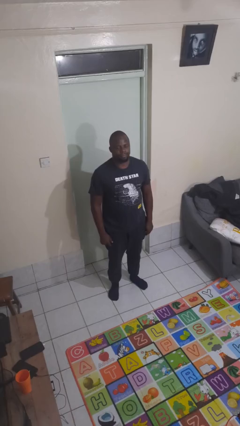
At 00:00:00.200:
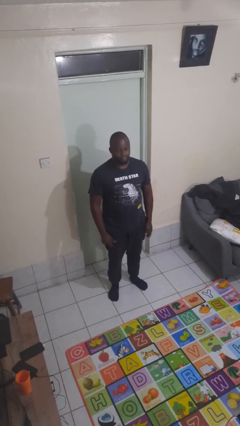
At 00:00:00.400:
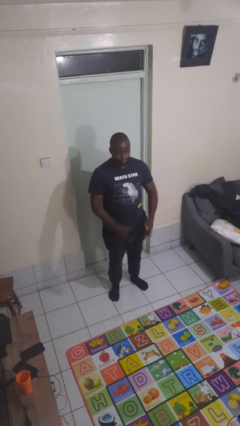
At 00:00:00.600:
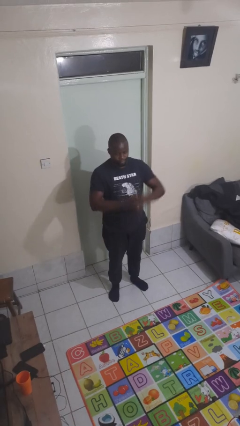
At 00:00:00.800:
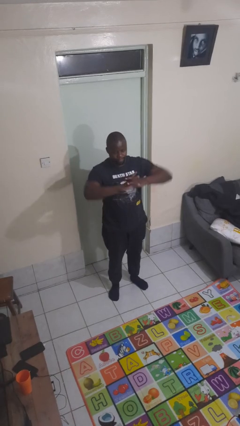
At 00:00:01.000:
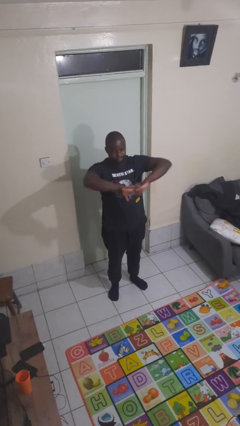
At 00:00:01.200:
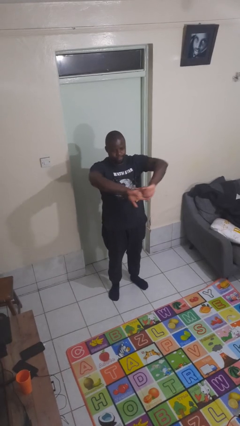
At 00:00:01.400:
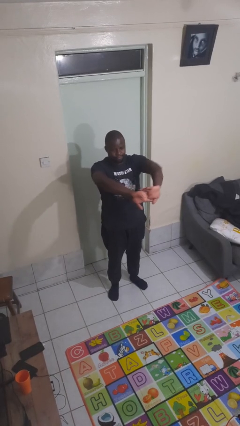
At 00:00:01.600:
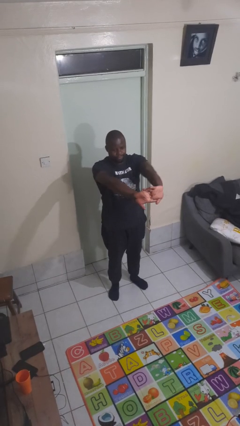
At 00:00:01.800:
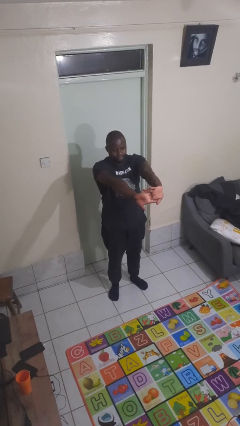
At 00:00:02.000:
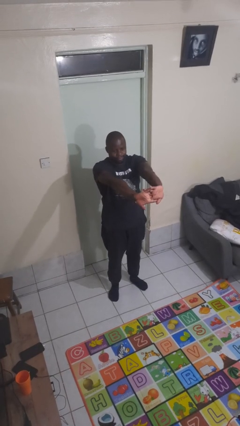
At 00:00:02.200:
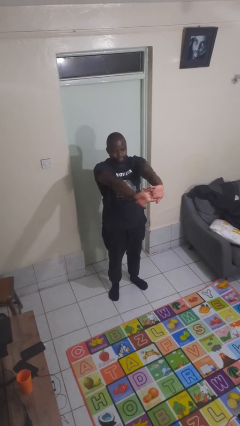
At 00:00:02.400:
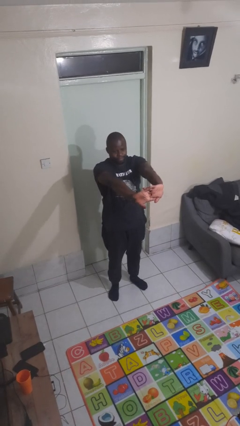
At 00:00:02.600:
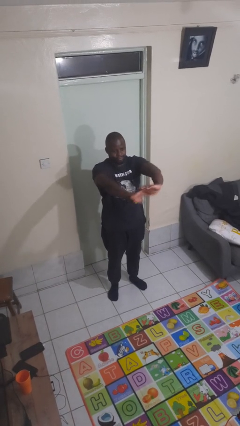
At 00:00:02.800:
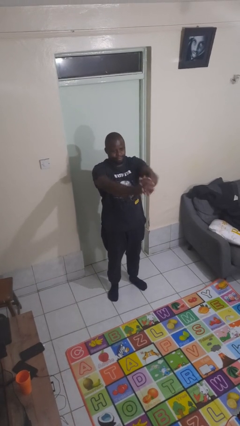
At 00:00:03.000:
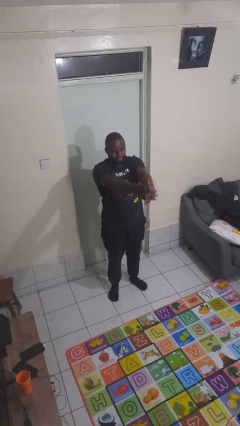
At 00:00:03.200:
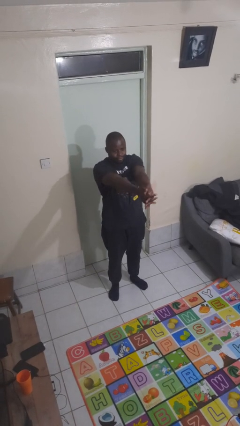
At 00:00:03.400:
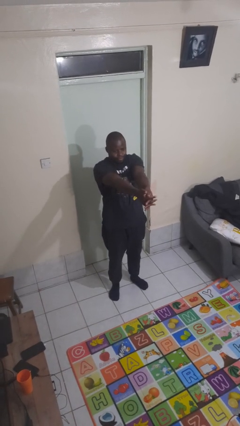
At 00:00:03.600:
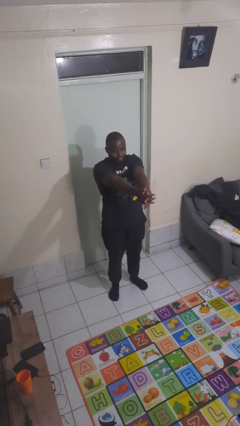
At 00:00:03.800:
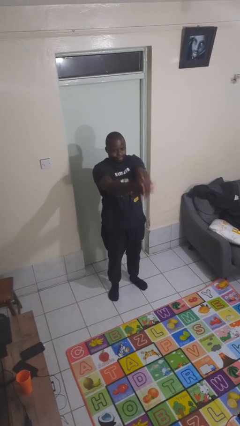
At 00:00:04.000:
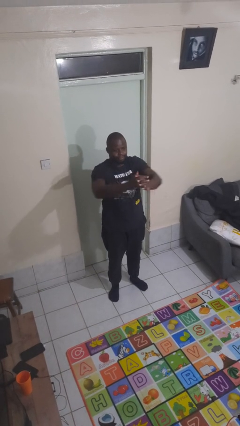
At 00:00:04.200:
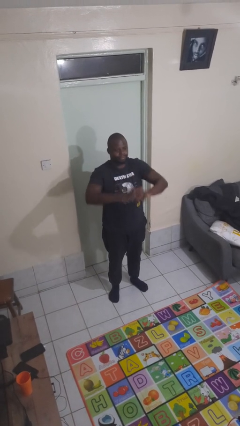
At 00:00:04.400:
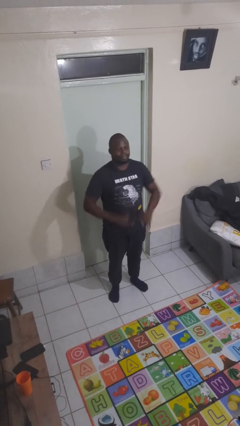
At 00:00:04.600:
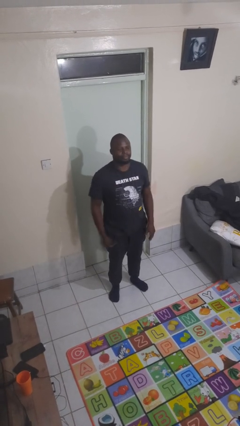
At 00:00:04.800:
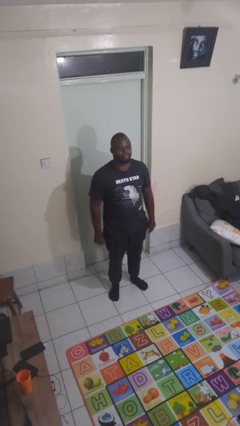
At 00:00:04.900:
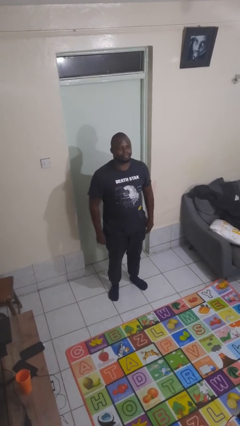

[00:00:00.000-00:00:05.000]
person cracks knuckles

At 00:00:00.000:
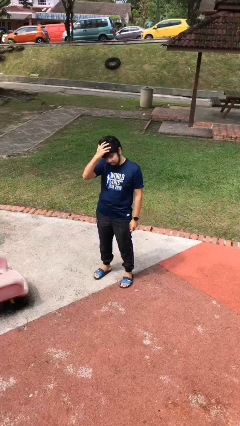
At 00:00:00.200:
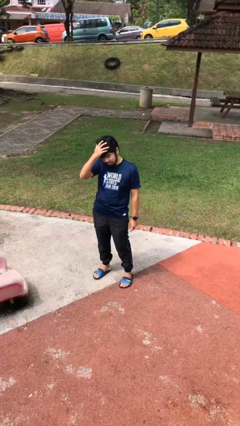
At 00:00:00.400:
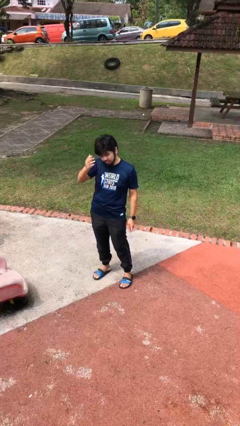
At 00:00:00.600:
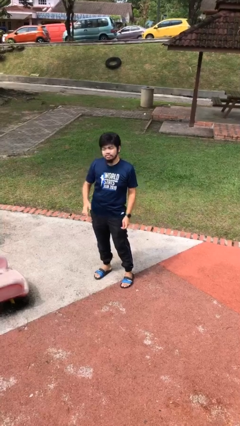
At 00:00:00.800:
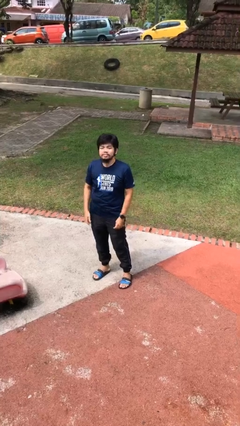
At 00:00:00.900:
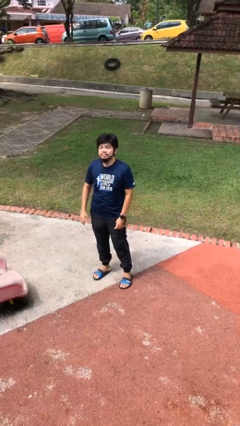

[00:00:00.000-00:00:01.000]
person pats head

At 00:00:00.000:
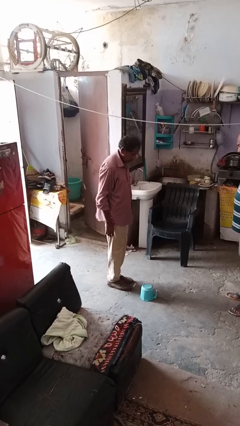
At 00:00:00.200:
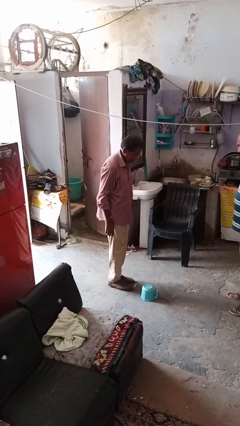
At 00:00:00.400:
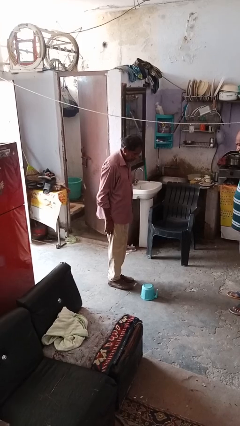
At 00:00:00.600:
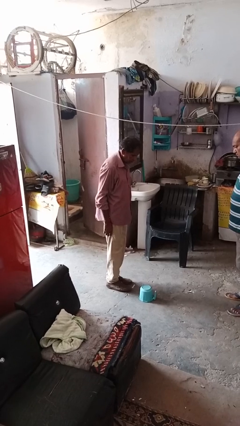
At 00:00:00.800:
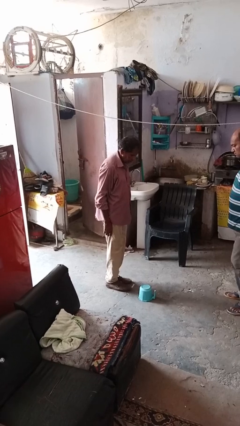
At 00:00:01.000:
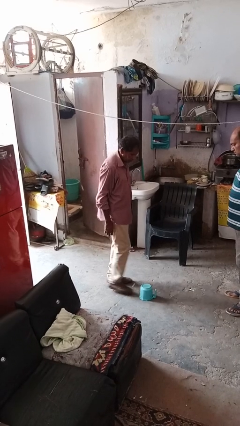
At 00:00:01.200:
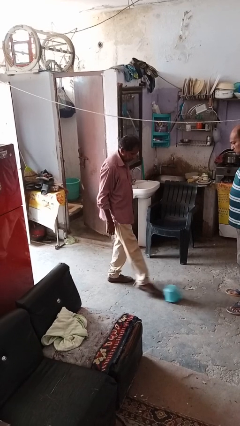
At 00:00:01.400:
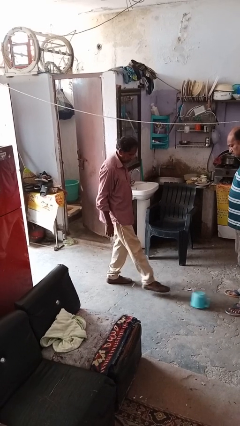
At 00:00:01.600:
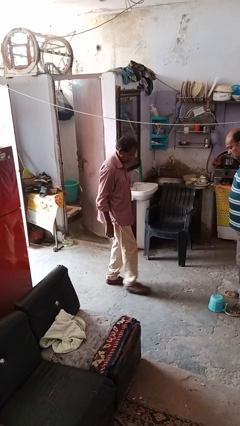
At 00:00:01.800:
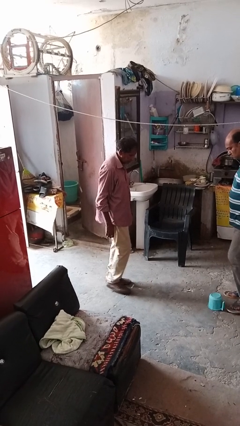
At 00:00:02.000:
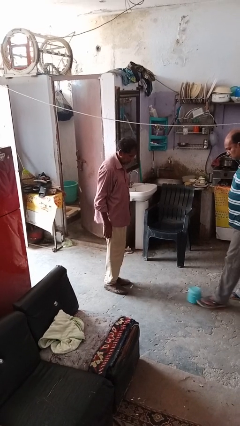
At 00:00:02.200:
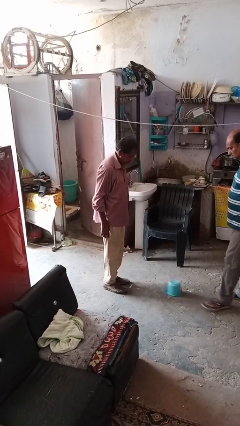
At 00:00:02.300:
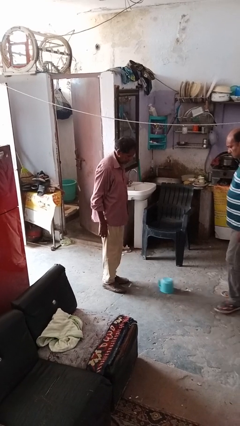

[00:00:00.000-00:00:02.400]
person kicks object to person

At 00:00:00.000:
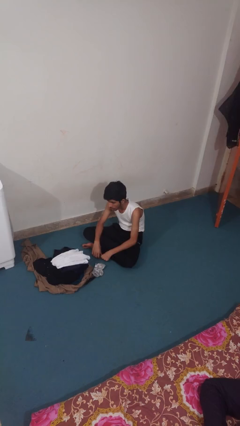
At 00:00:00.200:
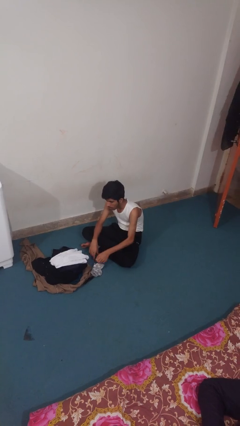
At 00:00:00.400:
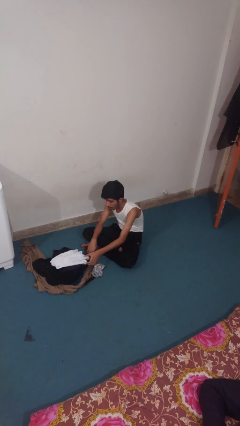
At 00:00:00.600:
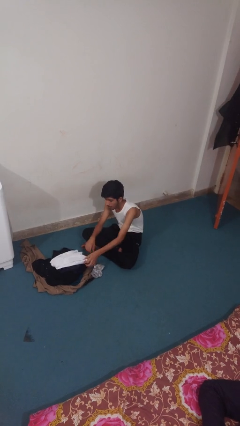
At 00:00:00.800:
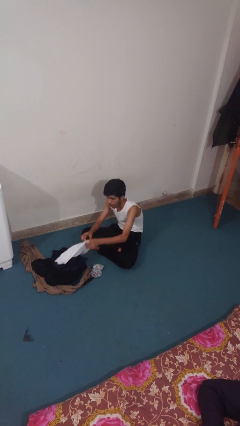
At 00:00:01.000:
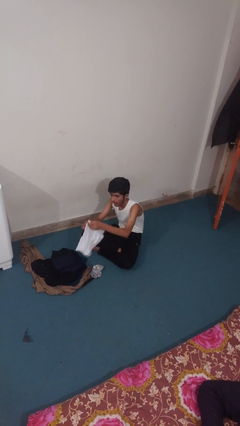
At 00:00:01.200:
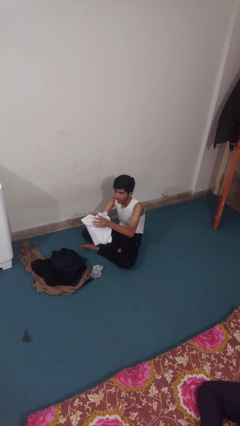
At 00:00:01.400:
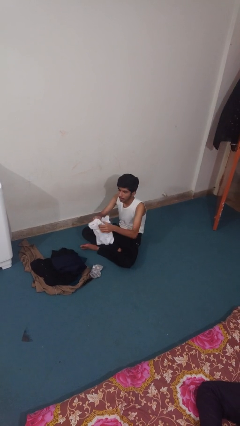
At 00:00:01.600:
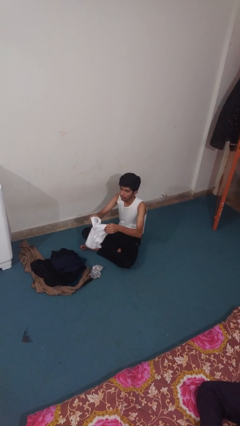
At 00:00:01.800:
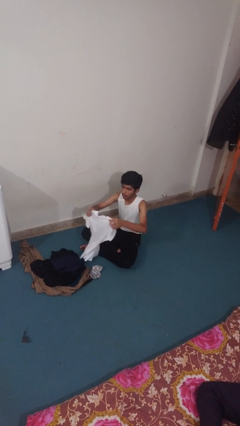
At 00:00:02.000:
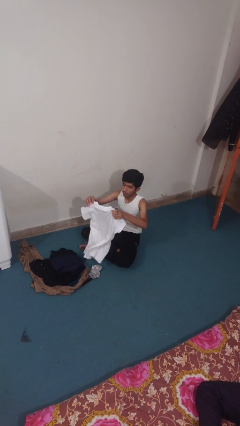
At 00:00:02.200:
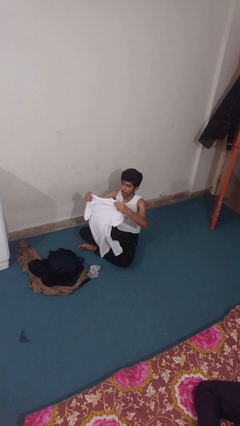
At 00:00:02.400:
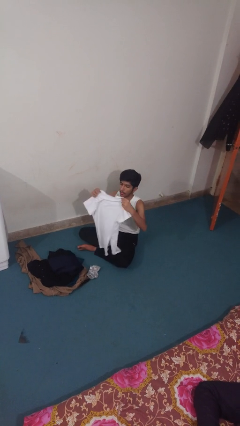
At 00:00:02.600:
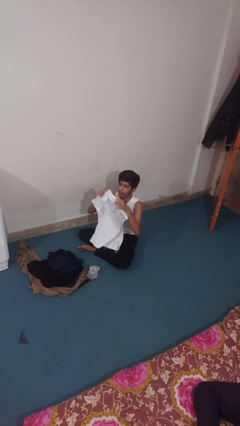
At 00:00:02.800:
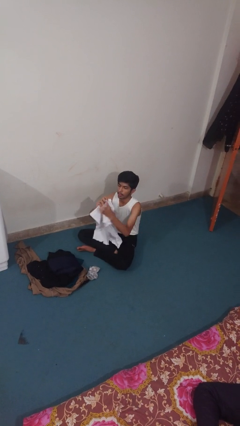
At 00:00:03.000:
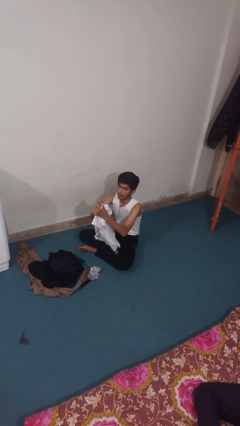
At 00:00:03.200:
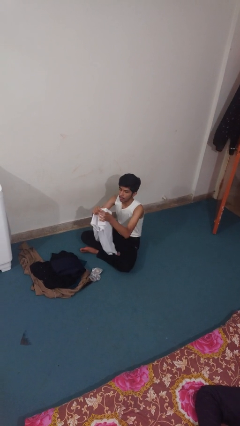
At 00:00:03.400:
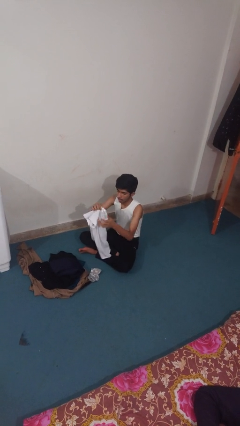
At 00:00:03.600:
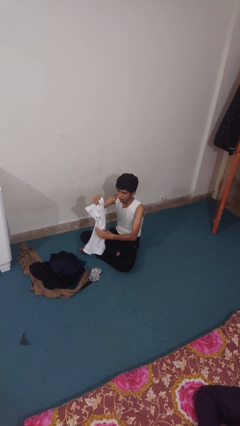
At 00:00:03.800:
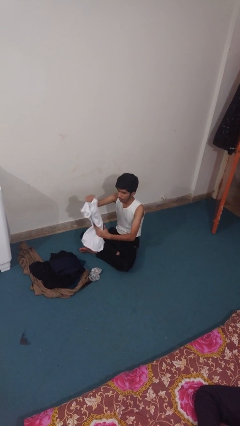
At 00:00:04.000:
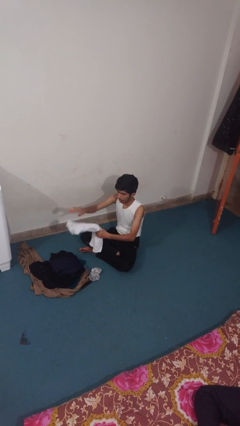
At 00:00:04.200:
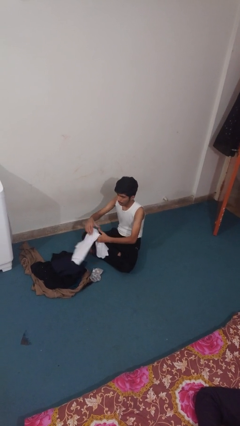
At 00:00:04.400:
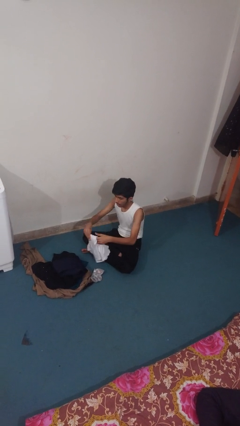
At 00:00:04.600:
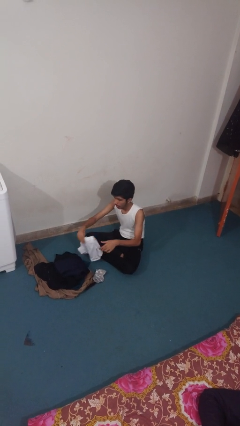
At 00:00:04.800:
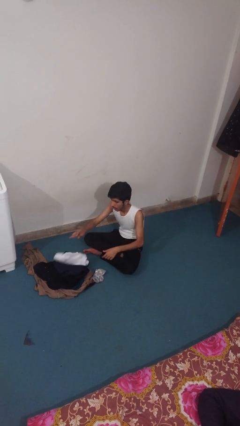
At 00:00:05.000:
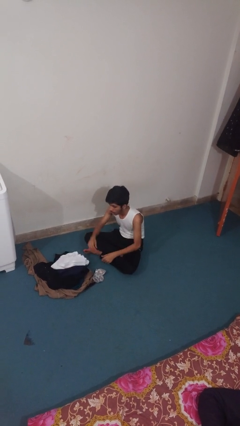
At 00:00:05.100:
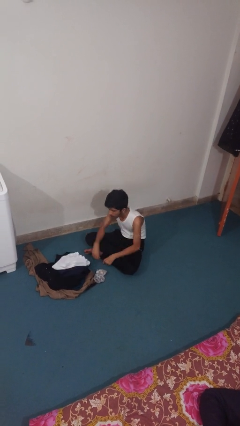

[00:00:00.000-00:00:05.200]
person folds shirt

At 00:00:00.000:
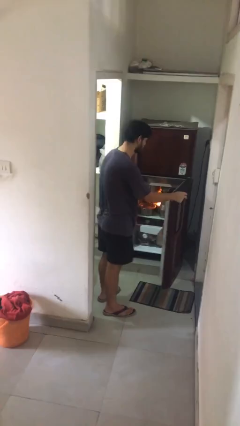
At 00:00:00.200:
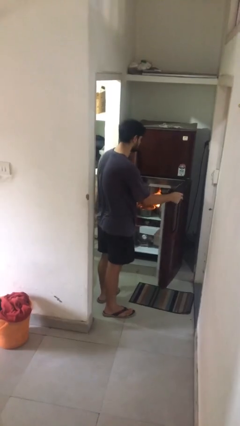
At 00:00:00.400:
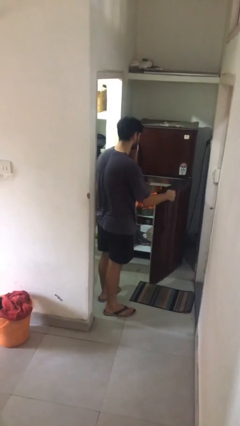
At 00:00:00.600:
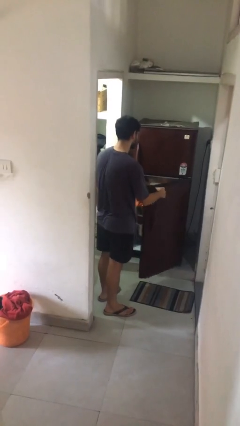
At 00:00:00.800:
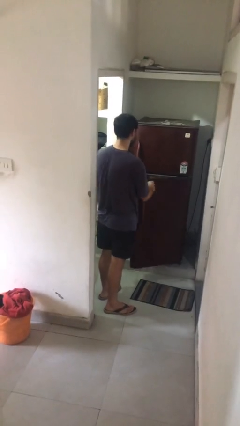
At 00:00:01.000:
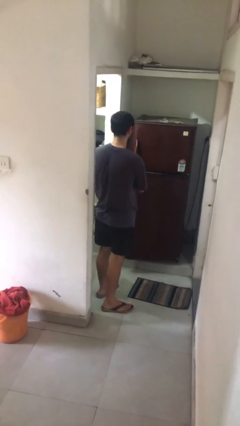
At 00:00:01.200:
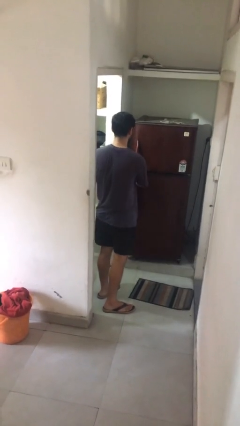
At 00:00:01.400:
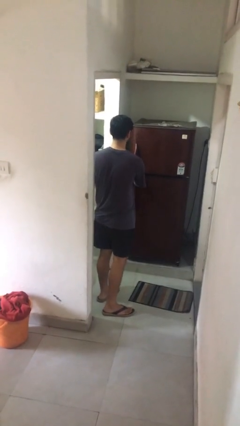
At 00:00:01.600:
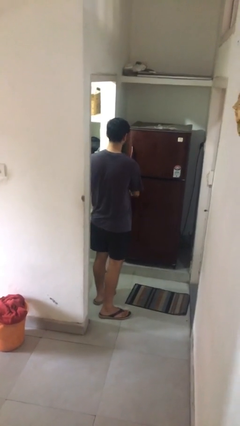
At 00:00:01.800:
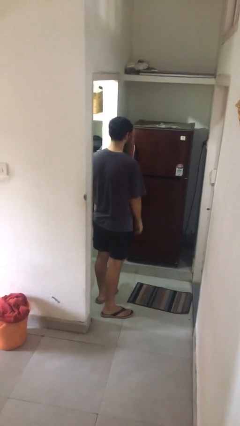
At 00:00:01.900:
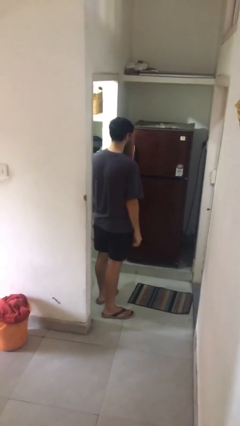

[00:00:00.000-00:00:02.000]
person closes refrigerator

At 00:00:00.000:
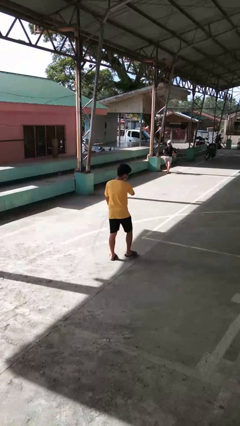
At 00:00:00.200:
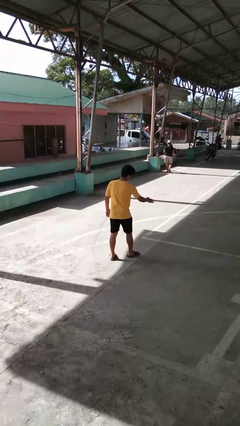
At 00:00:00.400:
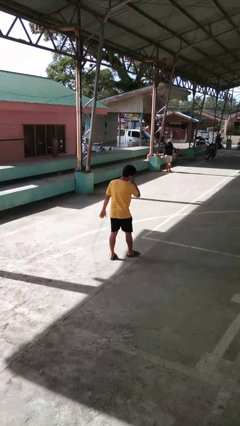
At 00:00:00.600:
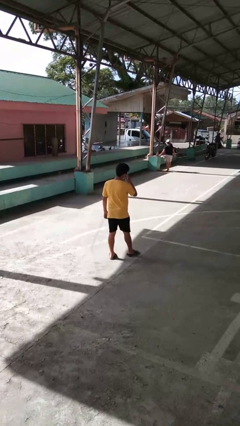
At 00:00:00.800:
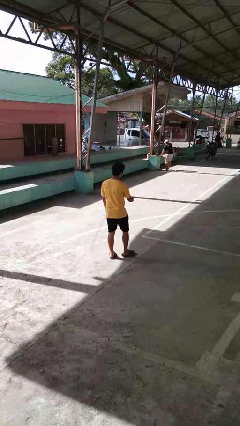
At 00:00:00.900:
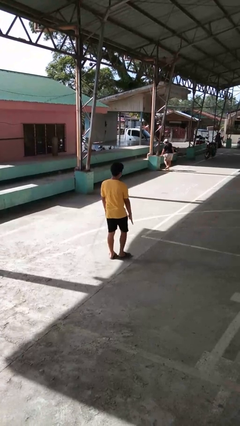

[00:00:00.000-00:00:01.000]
person karate chop

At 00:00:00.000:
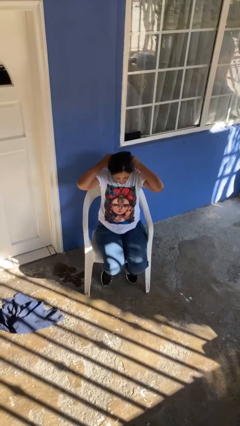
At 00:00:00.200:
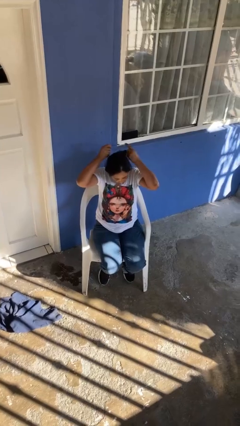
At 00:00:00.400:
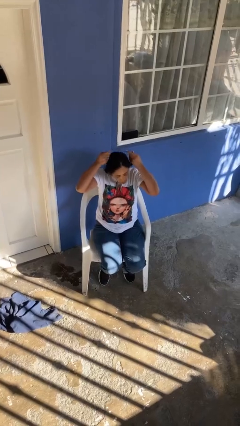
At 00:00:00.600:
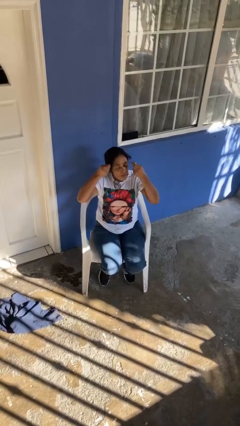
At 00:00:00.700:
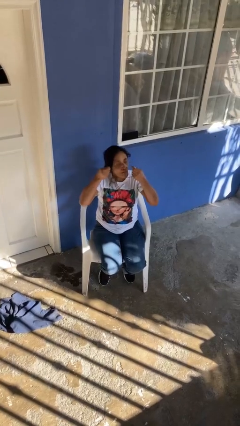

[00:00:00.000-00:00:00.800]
person takes off necklace
